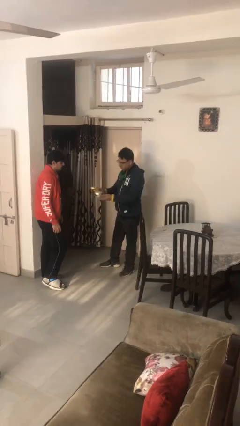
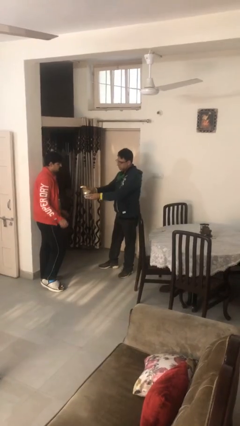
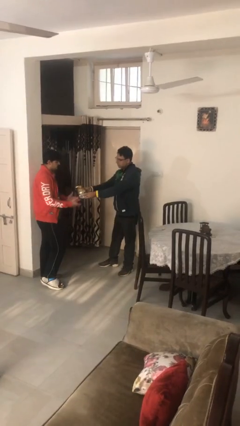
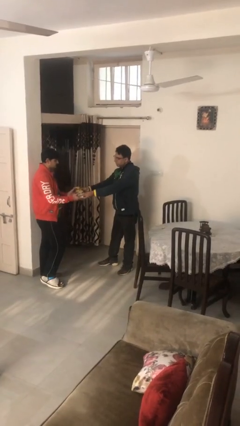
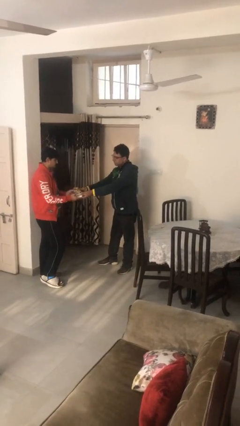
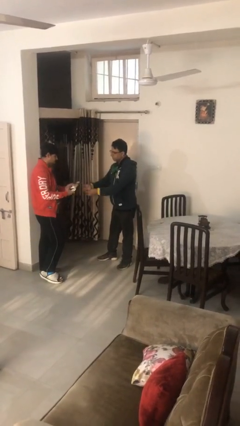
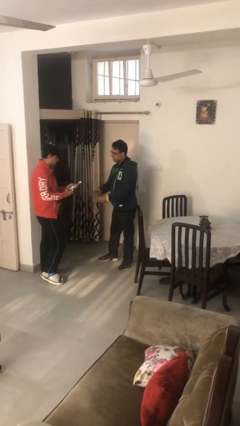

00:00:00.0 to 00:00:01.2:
person transfers object to person

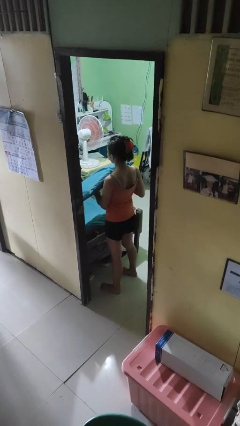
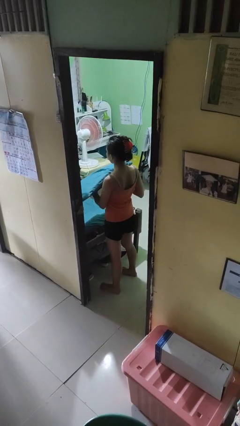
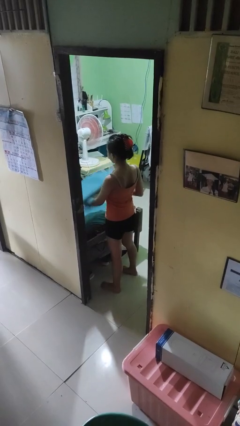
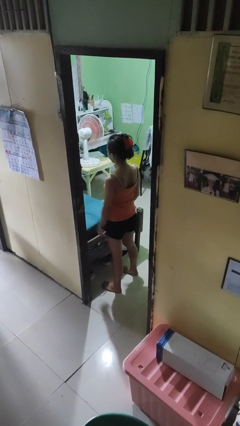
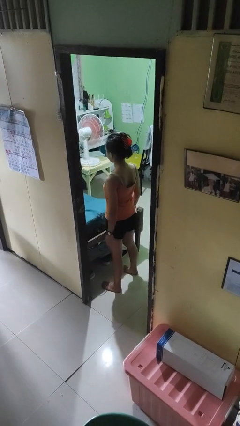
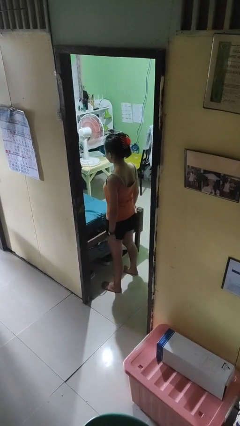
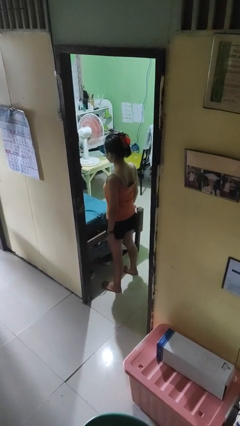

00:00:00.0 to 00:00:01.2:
person puts down object on bed

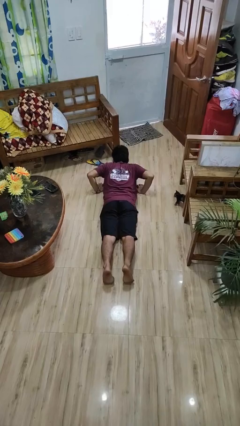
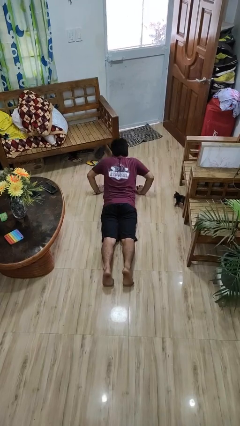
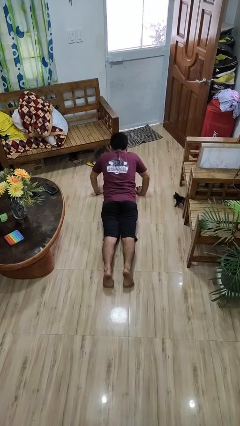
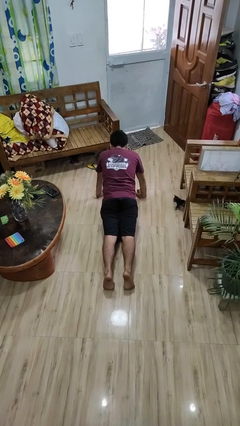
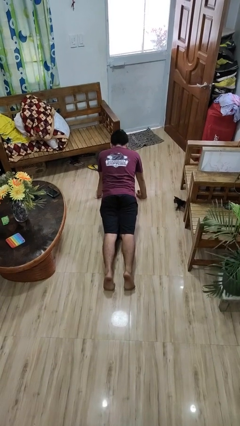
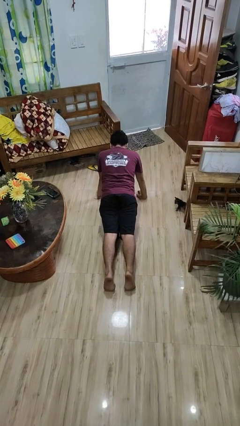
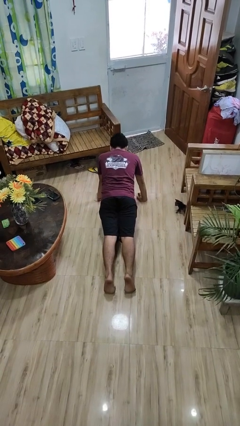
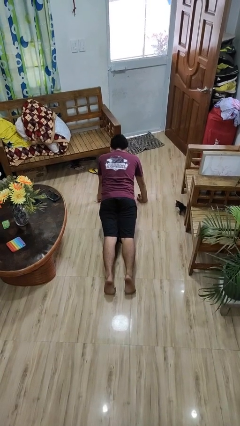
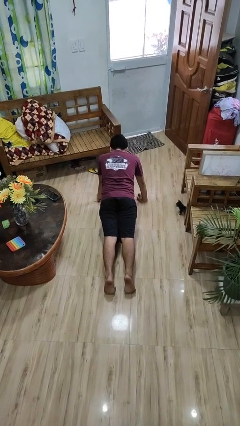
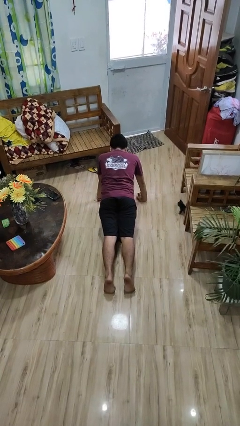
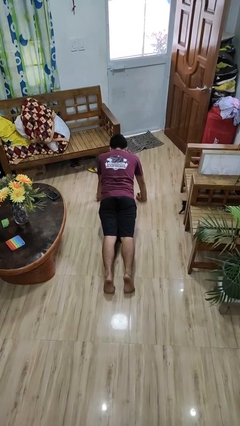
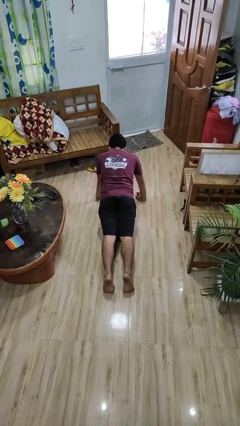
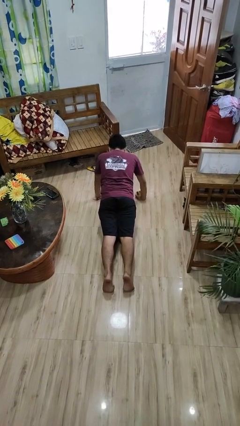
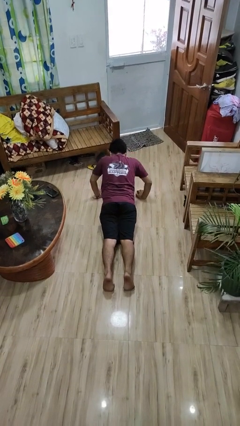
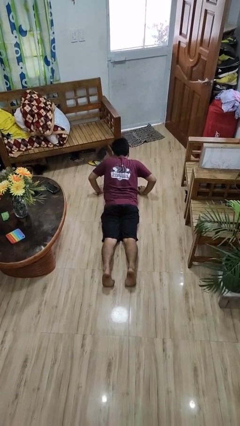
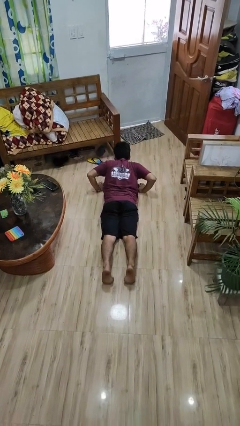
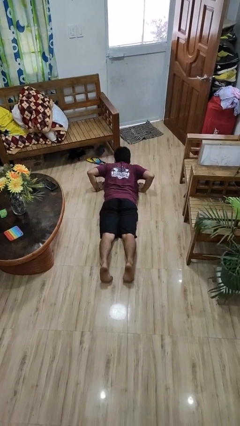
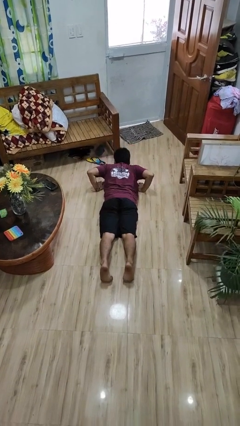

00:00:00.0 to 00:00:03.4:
person exercises with pushup

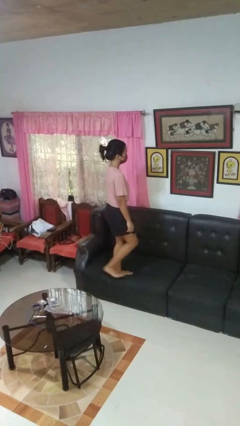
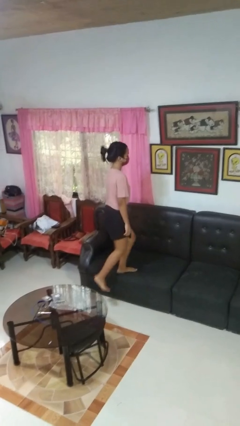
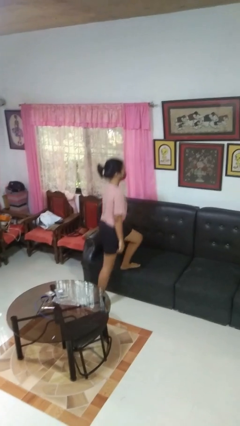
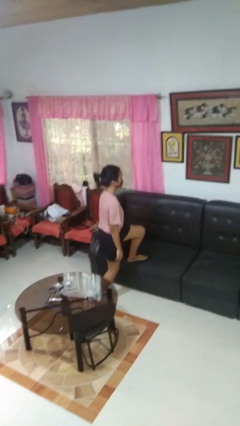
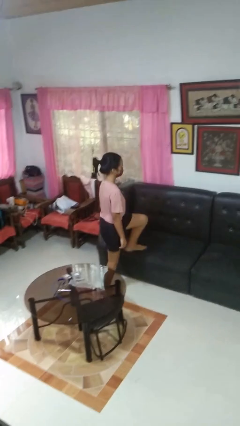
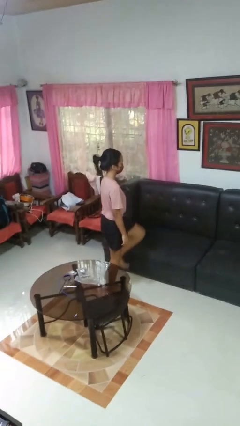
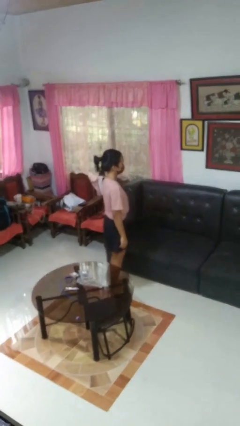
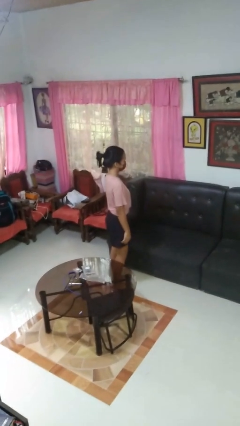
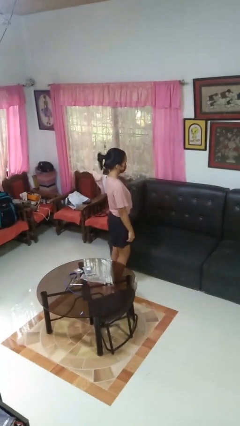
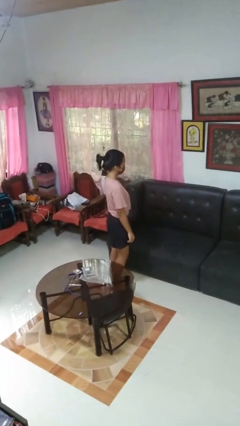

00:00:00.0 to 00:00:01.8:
person climbs off couch

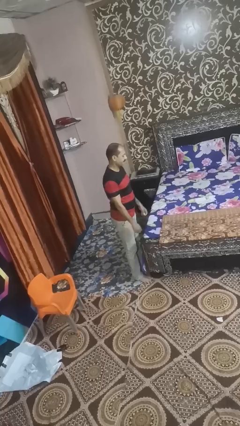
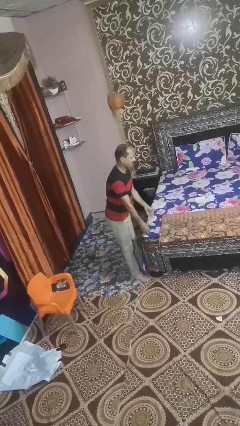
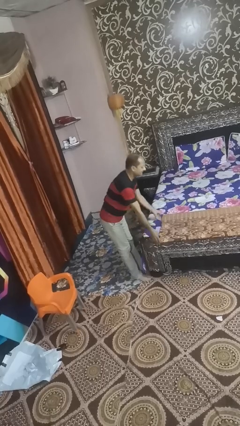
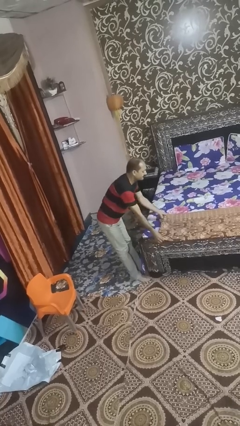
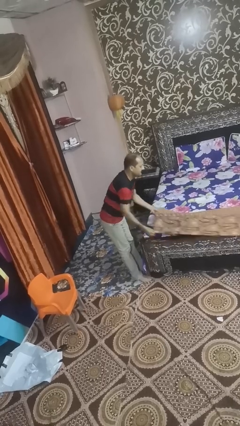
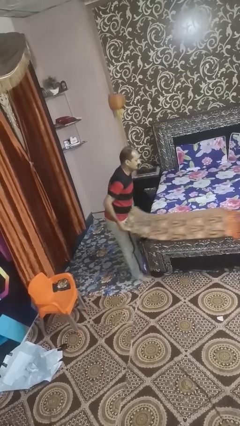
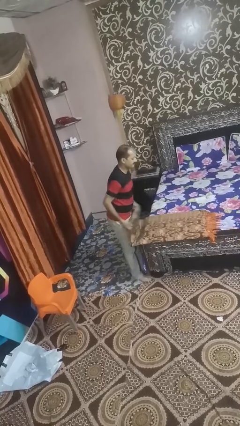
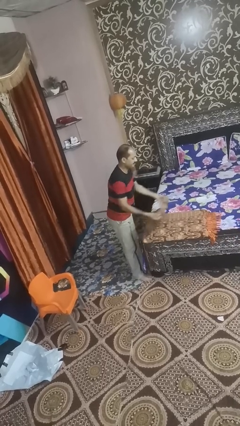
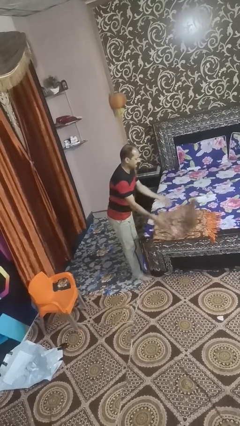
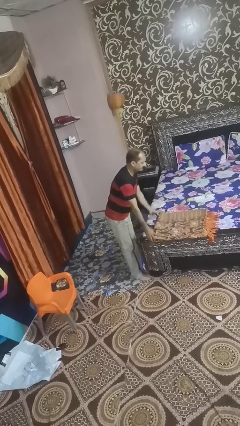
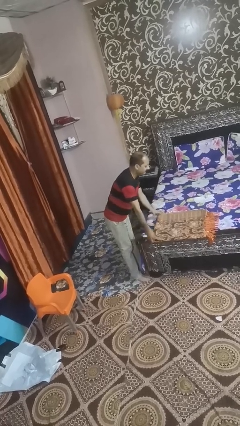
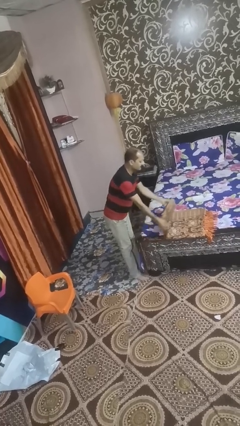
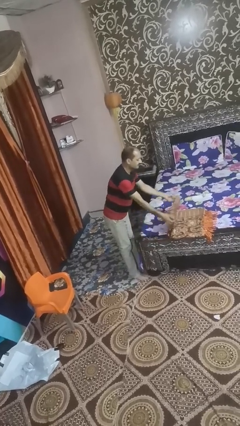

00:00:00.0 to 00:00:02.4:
person folds blanket

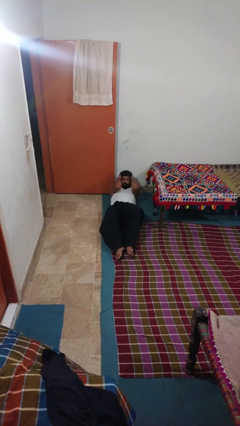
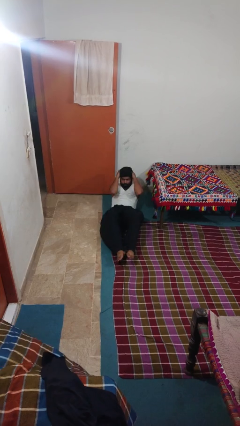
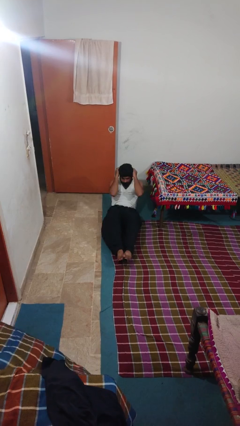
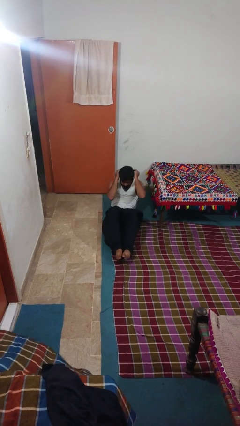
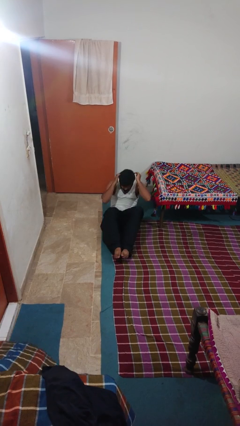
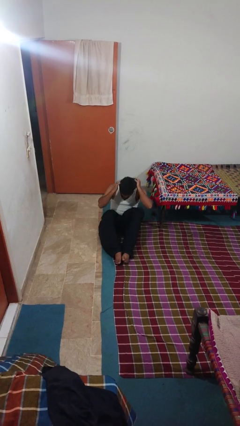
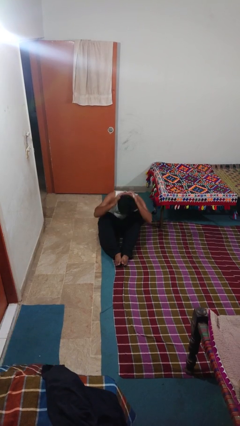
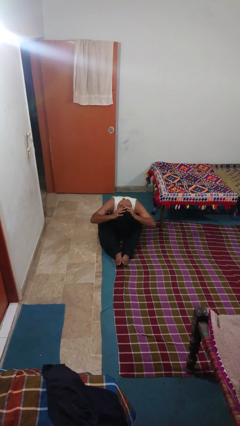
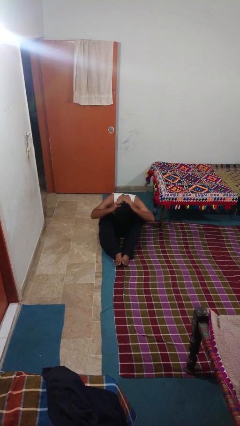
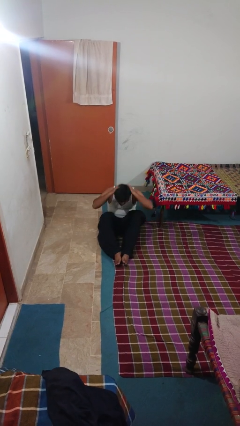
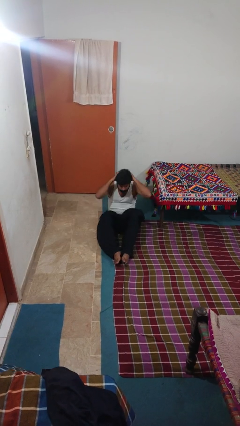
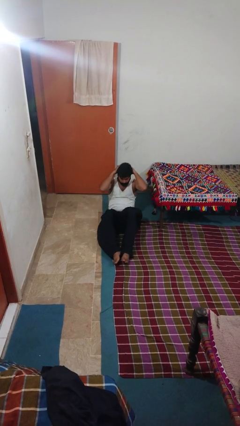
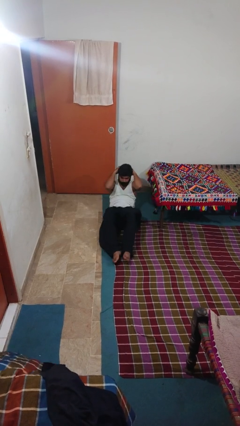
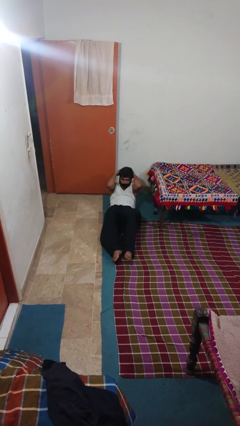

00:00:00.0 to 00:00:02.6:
person exercises with situp

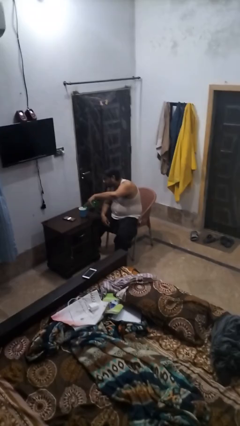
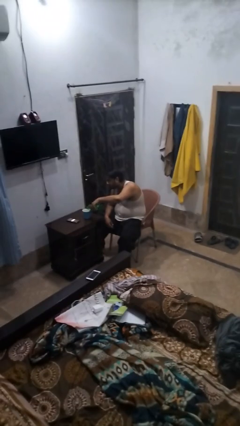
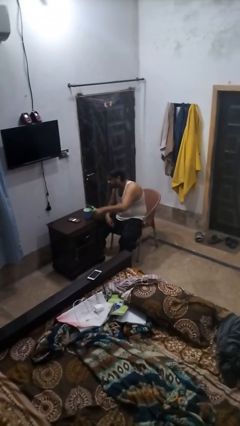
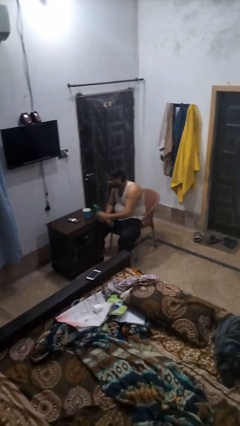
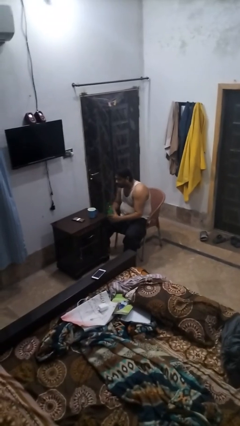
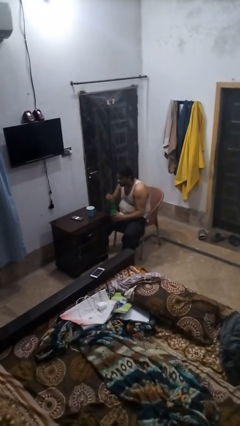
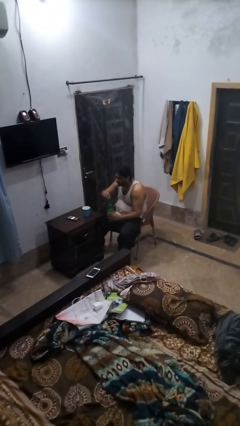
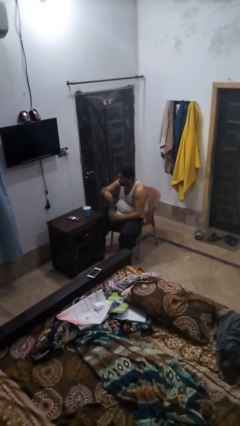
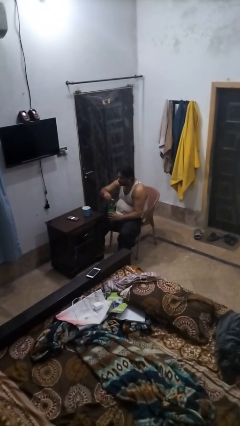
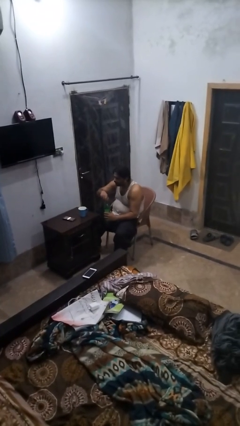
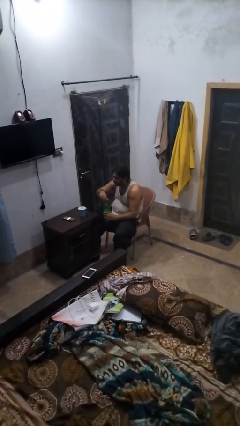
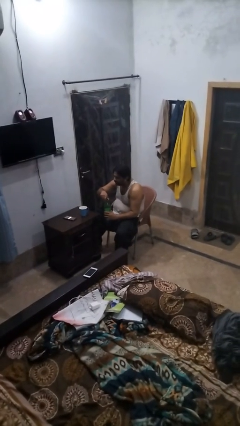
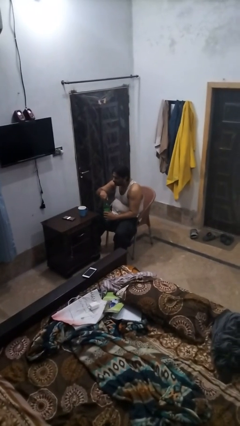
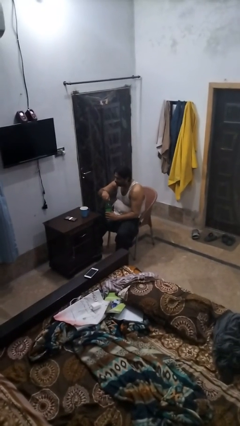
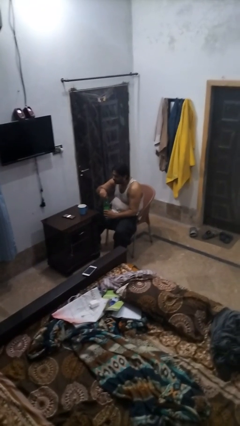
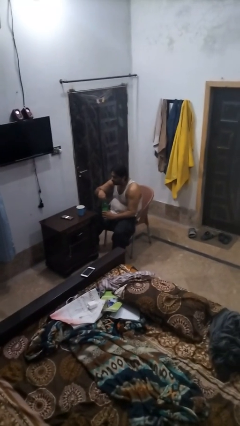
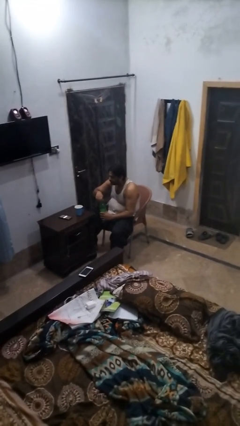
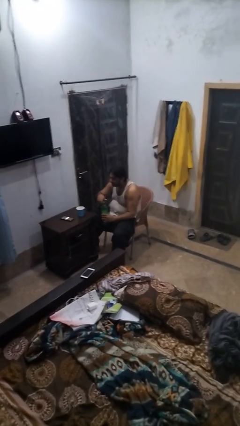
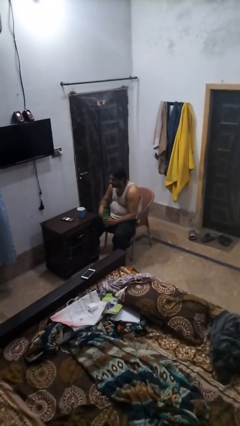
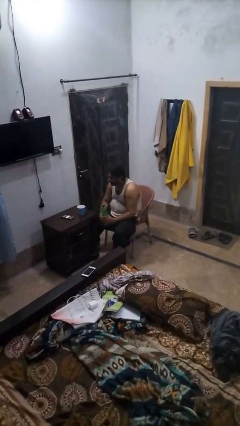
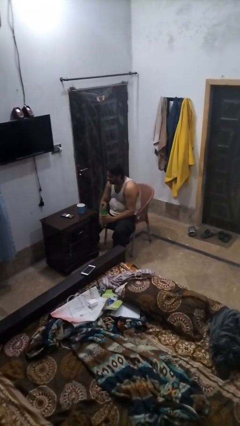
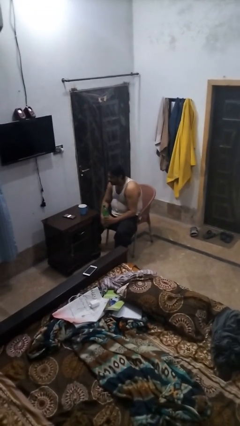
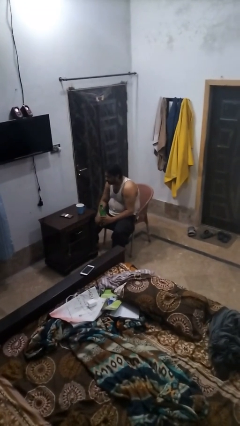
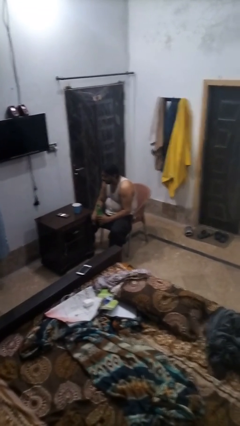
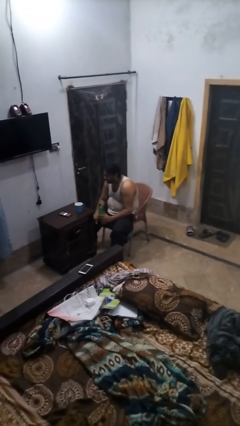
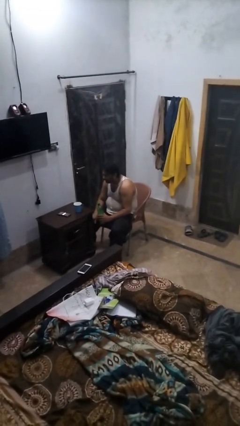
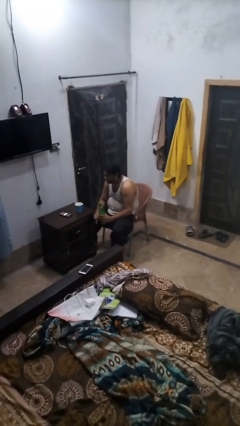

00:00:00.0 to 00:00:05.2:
person screws lid to bottle
